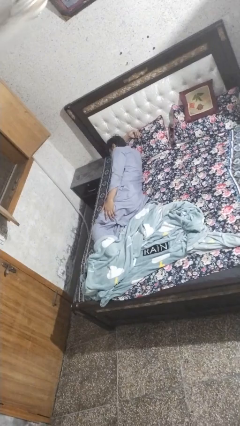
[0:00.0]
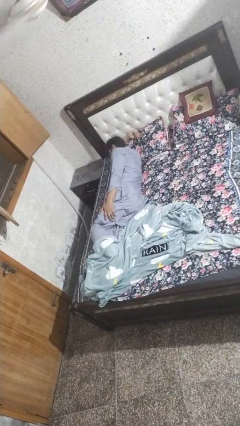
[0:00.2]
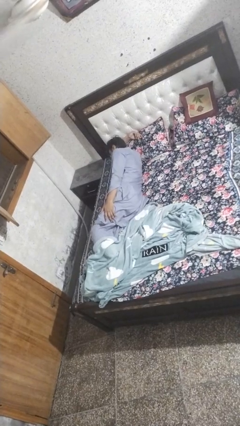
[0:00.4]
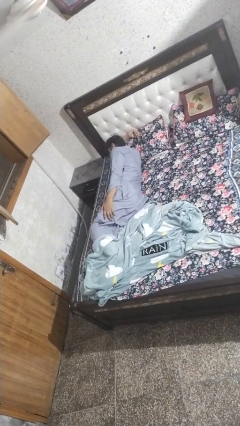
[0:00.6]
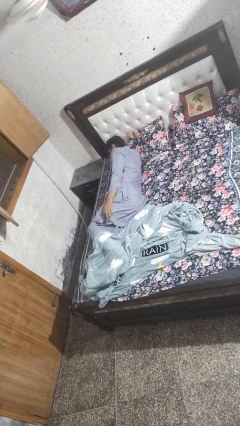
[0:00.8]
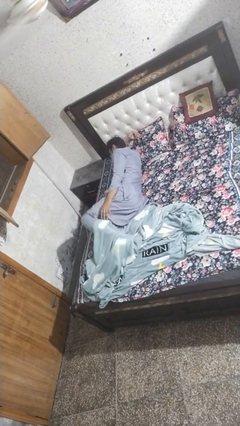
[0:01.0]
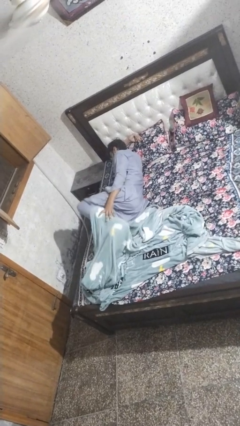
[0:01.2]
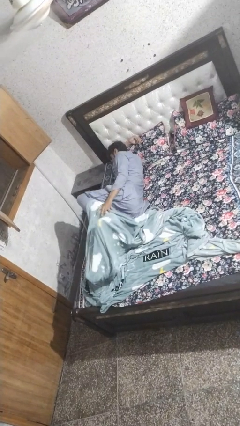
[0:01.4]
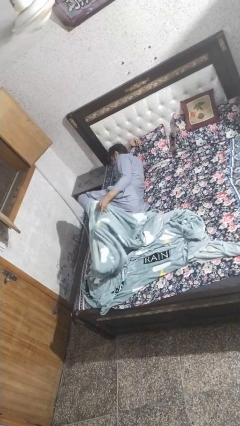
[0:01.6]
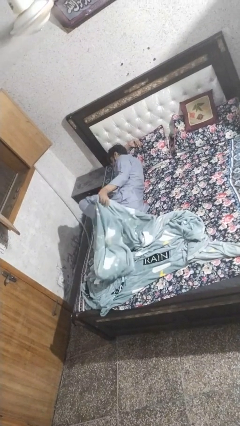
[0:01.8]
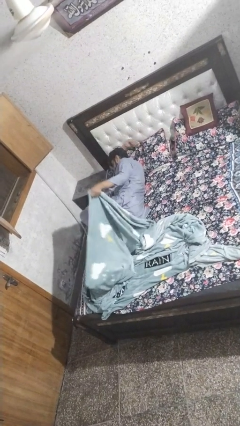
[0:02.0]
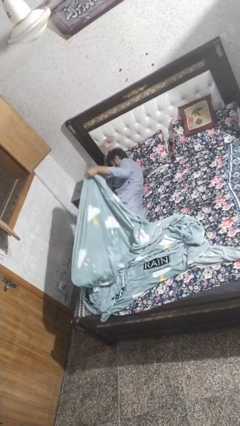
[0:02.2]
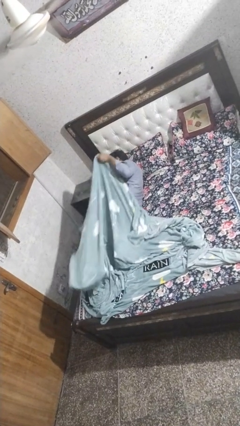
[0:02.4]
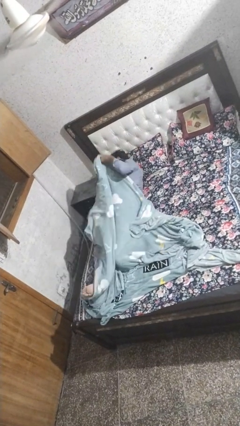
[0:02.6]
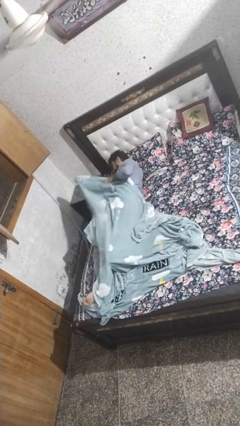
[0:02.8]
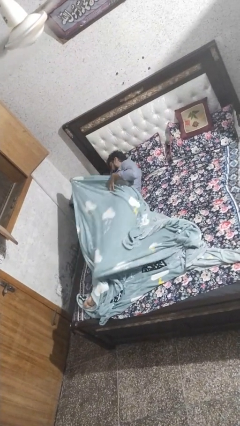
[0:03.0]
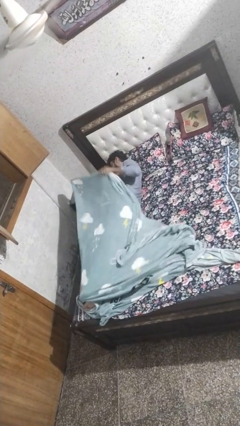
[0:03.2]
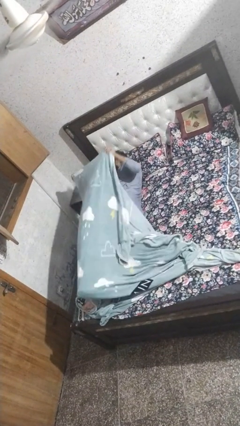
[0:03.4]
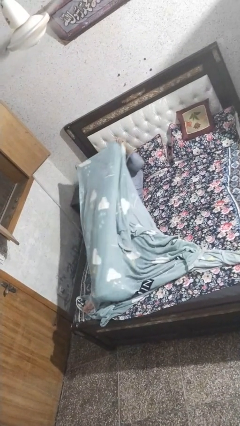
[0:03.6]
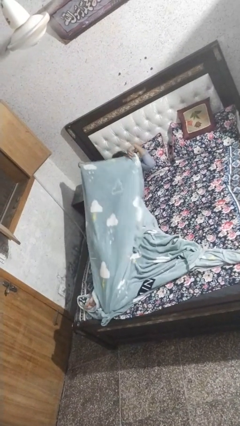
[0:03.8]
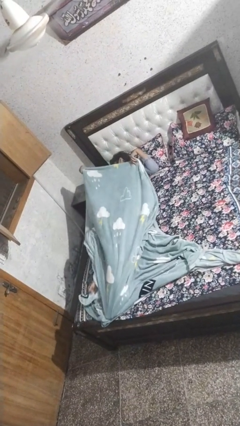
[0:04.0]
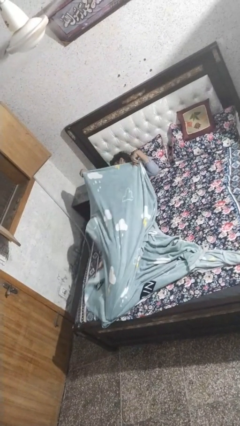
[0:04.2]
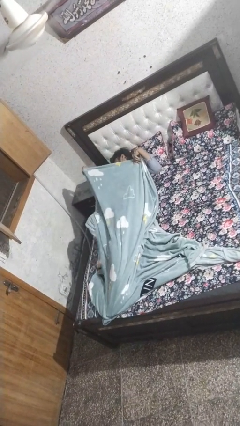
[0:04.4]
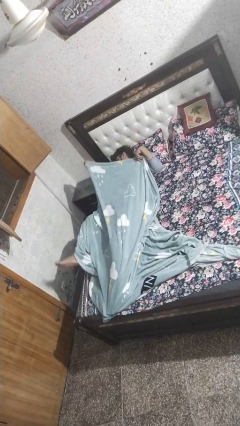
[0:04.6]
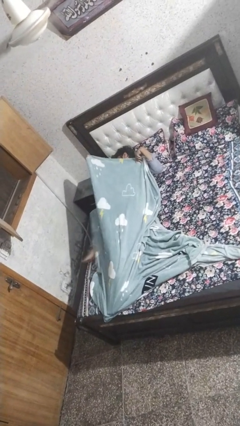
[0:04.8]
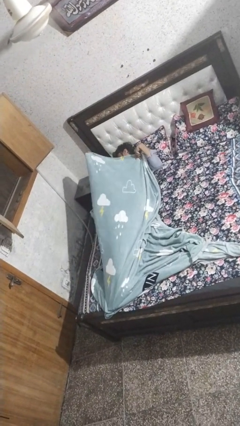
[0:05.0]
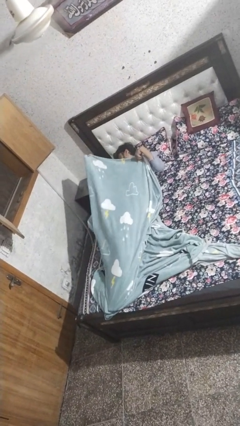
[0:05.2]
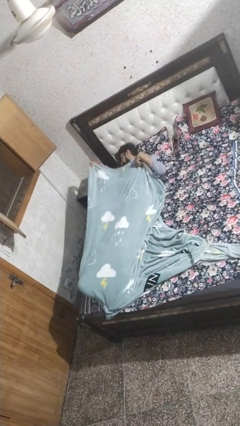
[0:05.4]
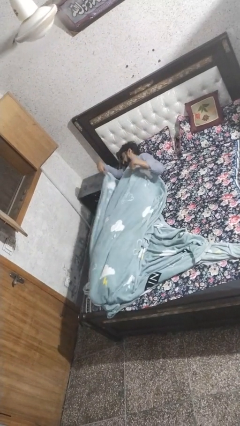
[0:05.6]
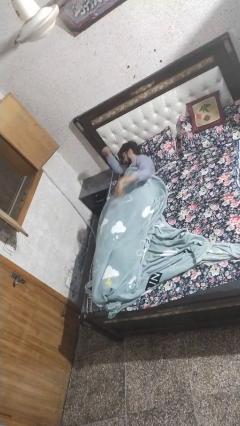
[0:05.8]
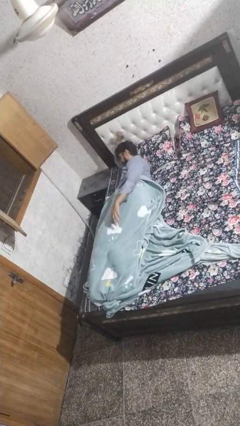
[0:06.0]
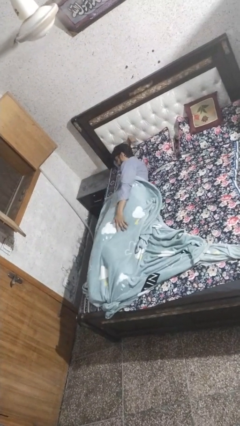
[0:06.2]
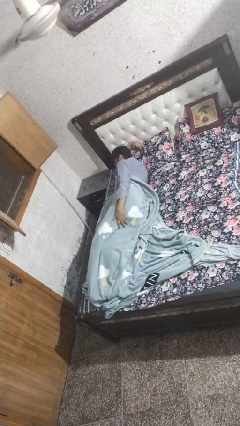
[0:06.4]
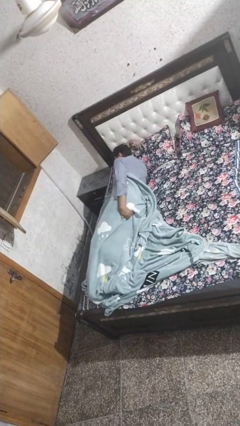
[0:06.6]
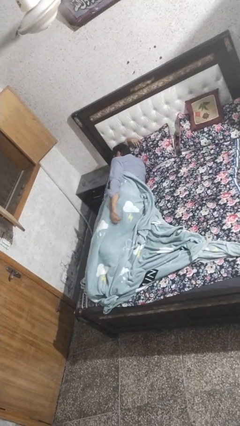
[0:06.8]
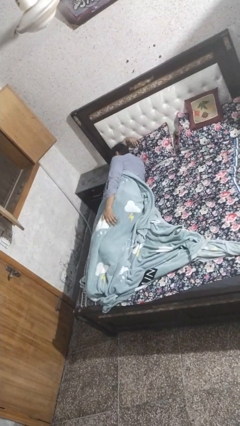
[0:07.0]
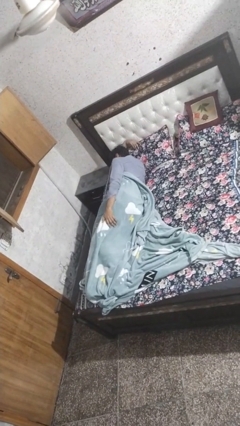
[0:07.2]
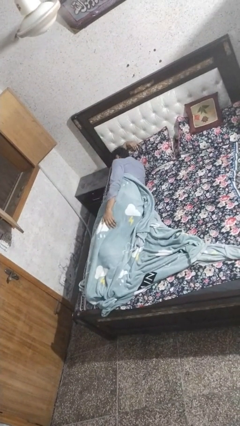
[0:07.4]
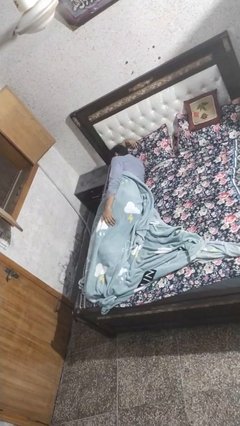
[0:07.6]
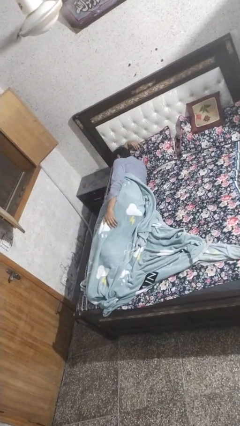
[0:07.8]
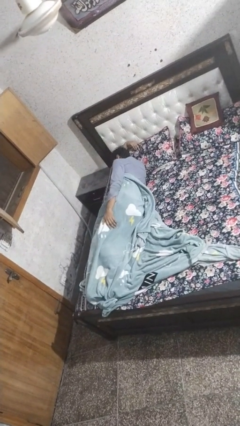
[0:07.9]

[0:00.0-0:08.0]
person covers with bedsheets

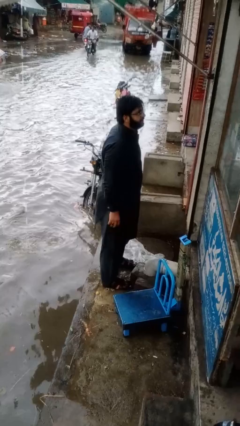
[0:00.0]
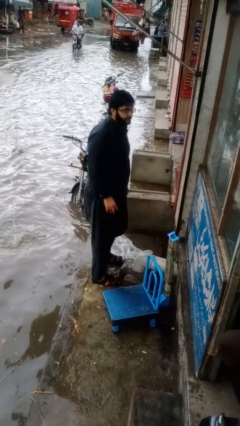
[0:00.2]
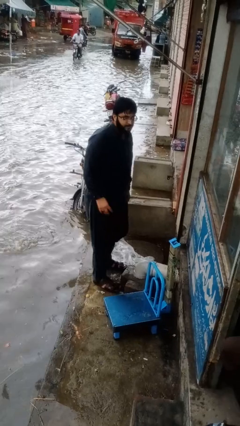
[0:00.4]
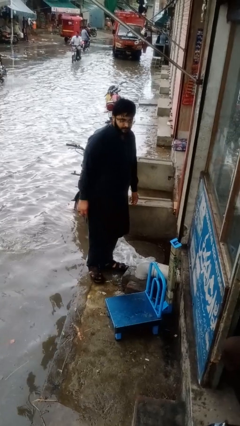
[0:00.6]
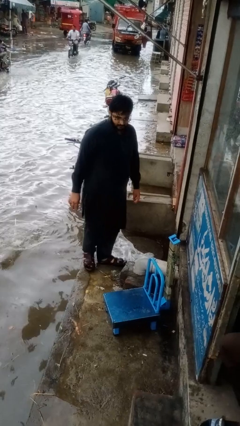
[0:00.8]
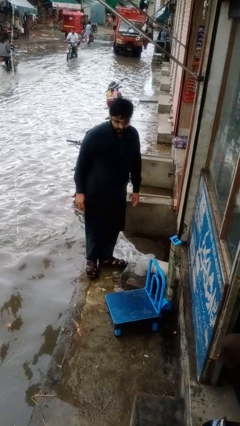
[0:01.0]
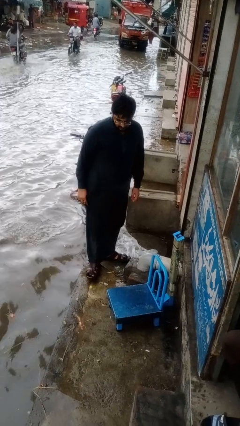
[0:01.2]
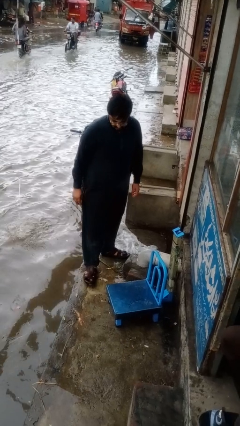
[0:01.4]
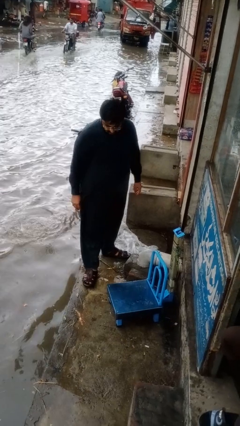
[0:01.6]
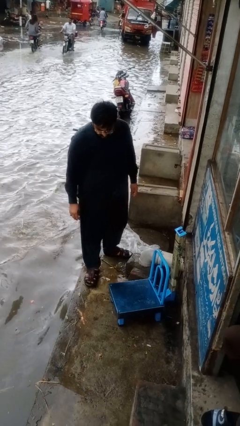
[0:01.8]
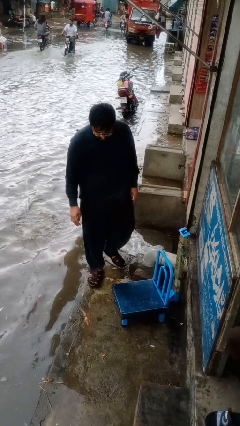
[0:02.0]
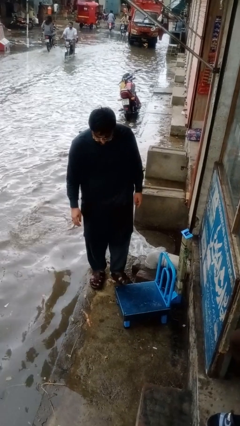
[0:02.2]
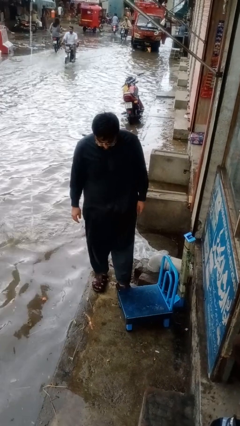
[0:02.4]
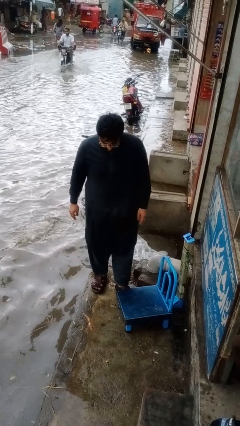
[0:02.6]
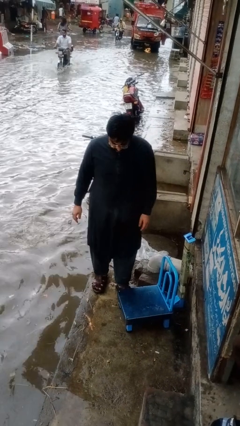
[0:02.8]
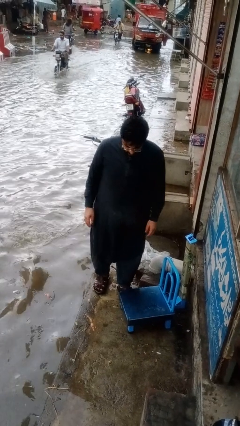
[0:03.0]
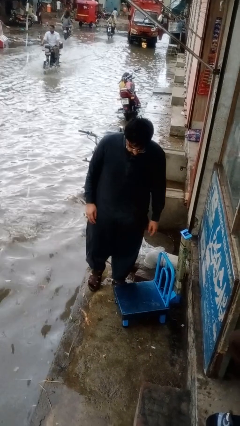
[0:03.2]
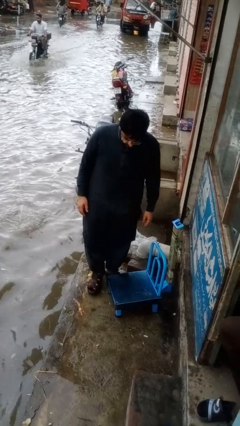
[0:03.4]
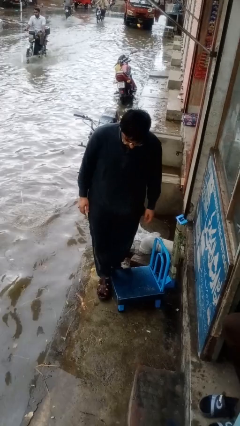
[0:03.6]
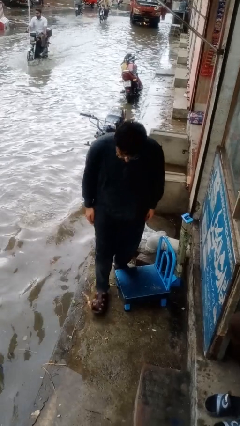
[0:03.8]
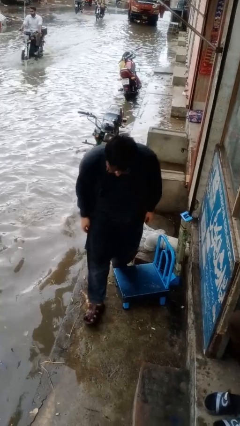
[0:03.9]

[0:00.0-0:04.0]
person trips on object on floor

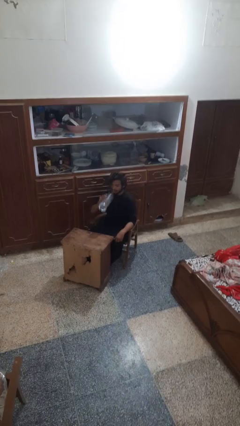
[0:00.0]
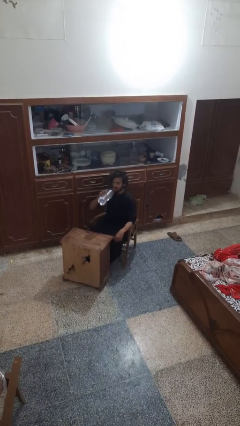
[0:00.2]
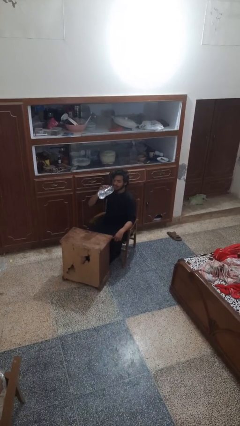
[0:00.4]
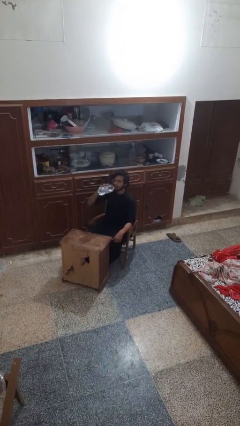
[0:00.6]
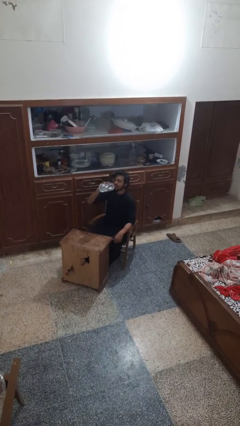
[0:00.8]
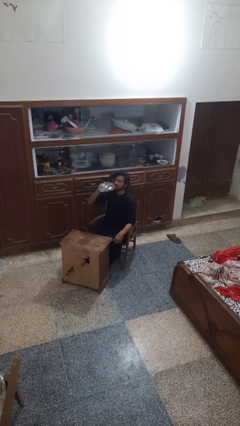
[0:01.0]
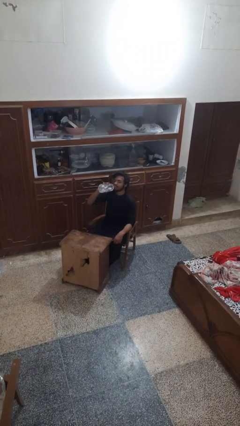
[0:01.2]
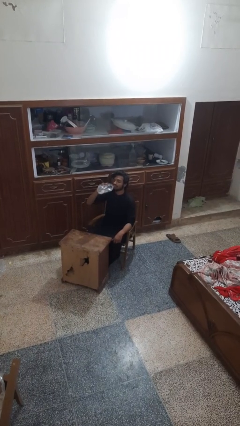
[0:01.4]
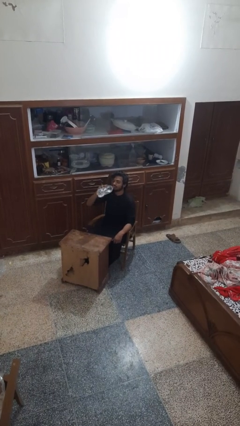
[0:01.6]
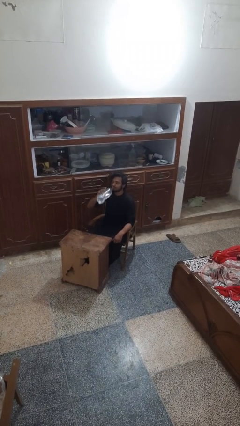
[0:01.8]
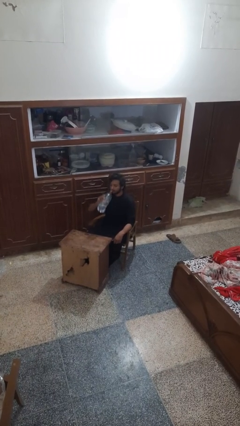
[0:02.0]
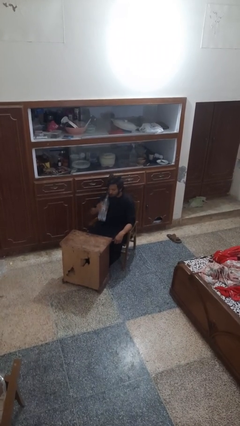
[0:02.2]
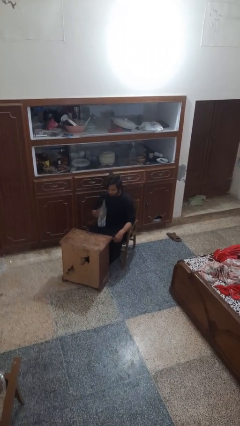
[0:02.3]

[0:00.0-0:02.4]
person drinks from bottle

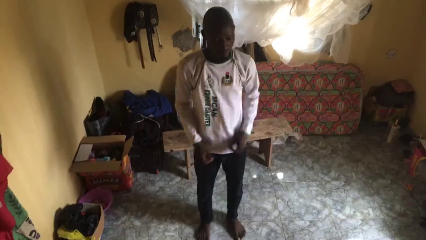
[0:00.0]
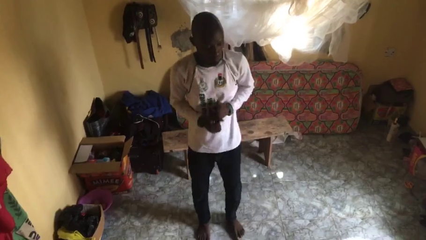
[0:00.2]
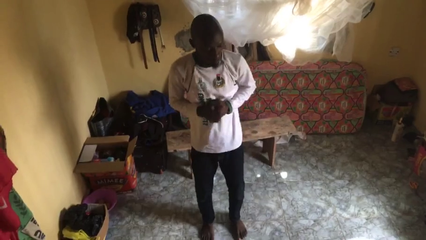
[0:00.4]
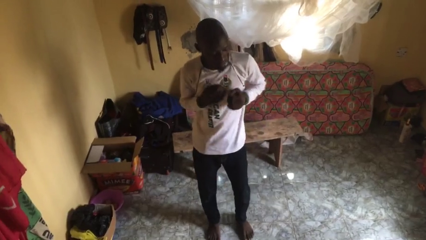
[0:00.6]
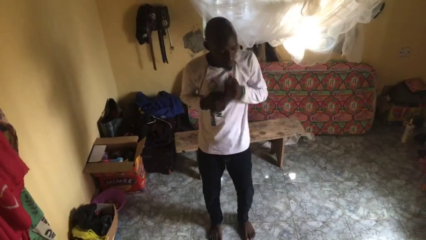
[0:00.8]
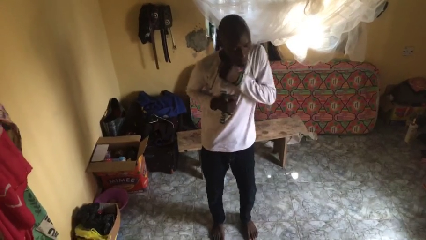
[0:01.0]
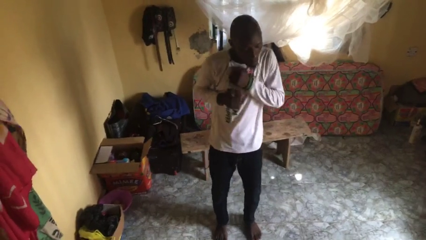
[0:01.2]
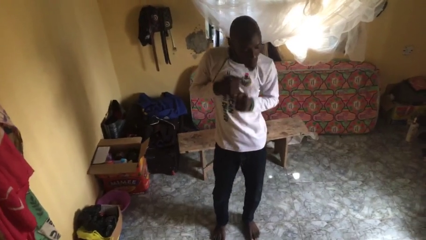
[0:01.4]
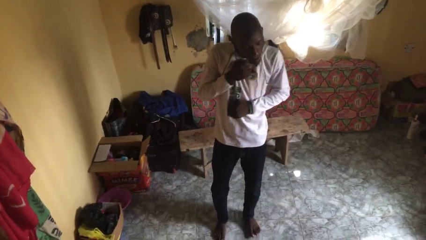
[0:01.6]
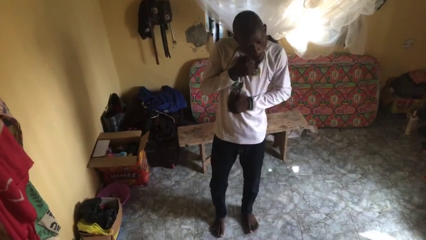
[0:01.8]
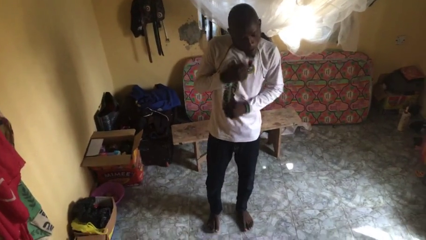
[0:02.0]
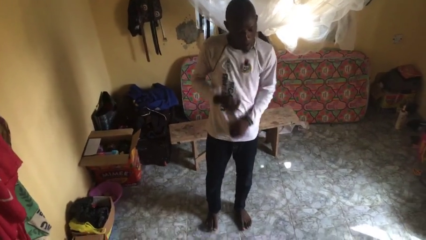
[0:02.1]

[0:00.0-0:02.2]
person dances in place

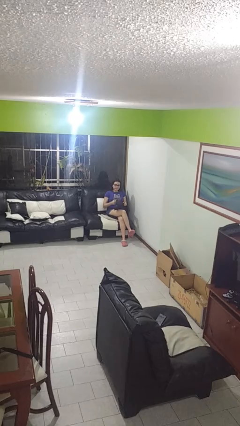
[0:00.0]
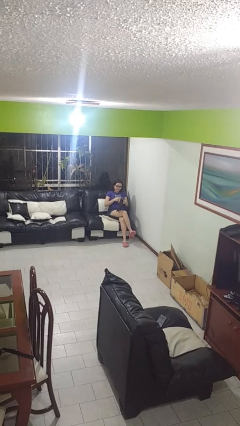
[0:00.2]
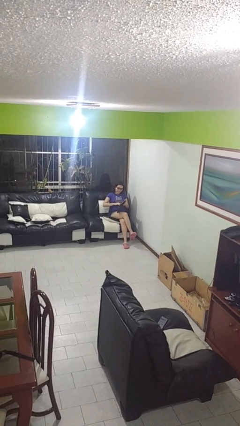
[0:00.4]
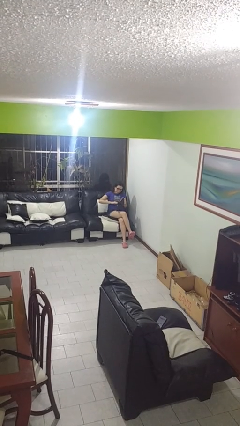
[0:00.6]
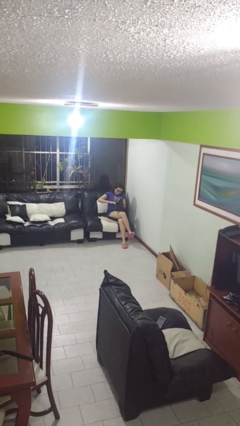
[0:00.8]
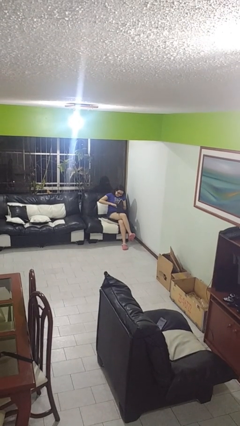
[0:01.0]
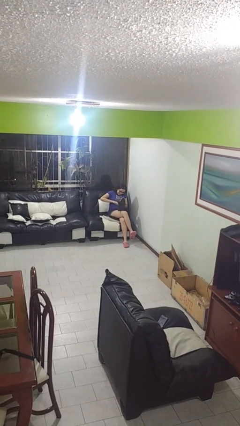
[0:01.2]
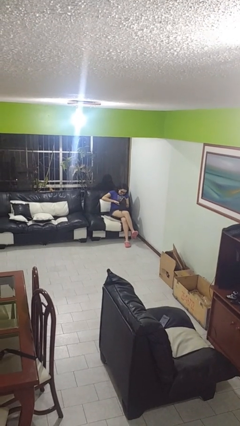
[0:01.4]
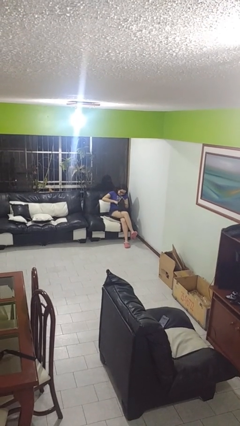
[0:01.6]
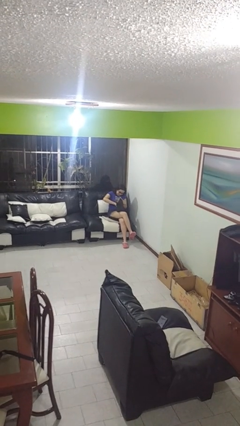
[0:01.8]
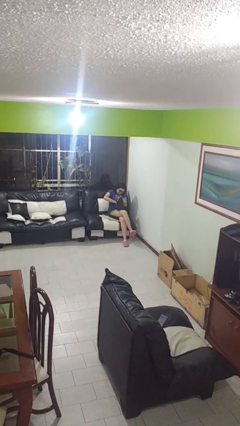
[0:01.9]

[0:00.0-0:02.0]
person searches in purse
